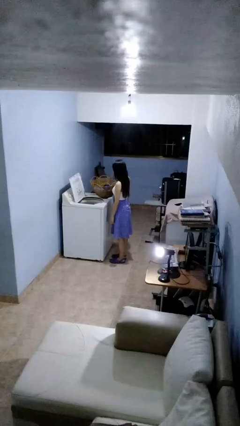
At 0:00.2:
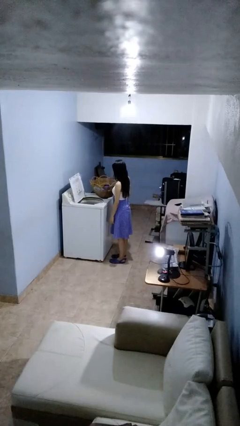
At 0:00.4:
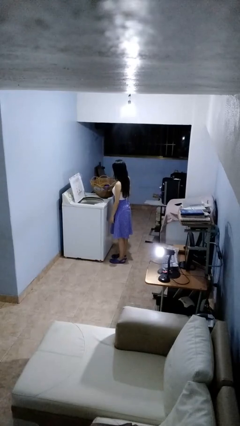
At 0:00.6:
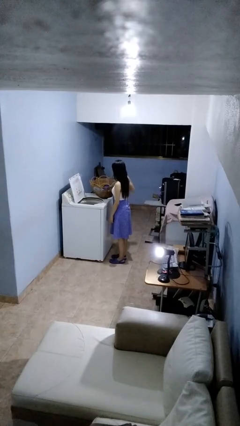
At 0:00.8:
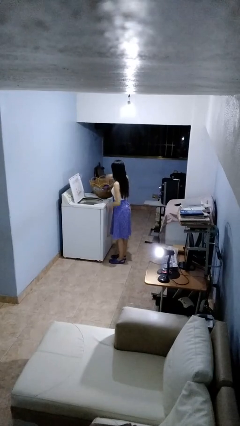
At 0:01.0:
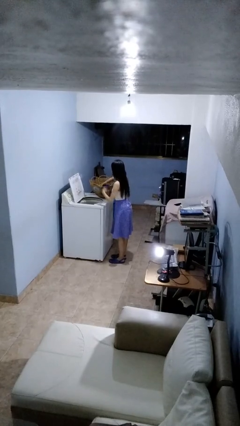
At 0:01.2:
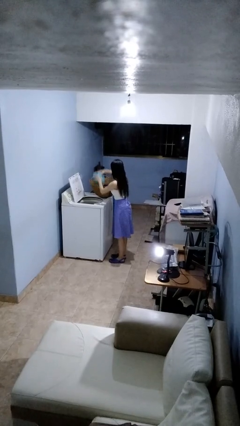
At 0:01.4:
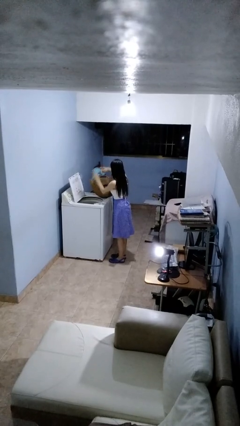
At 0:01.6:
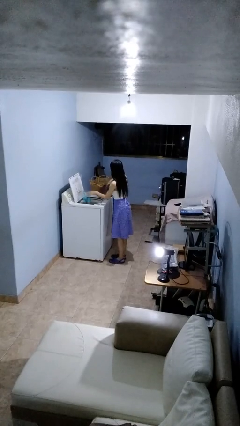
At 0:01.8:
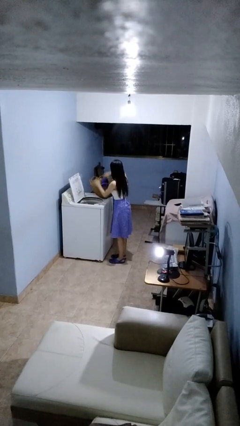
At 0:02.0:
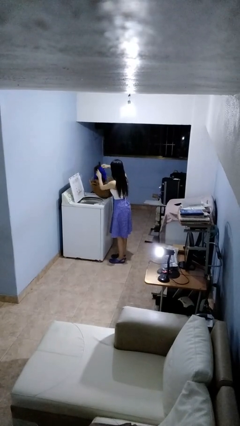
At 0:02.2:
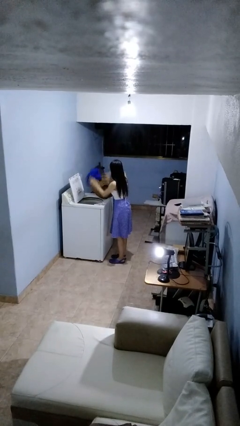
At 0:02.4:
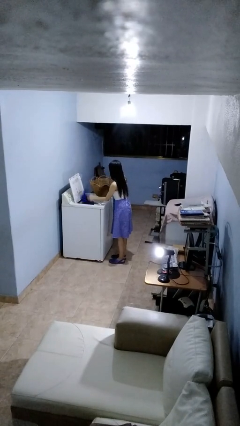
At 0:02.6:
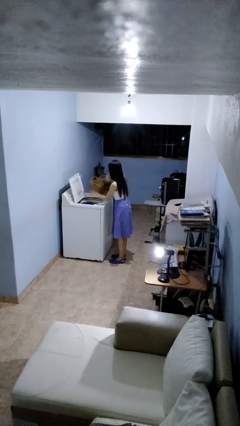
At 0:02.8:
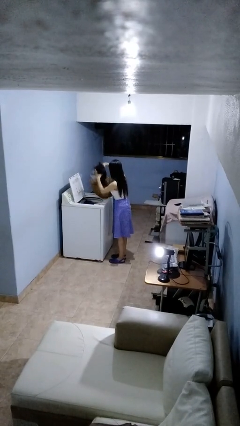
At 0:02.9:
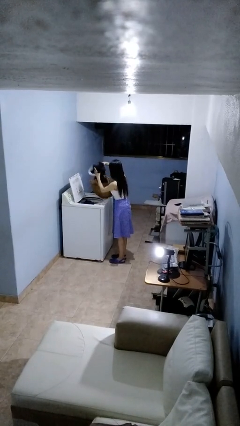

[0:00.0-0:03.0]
person loads clotheswasher

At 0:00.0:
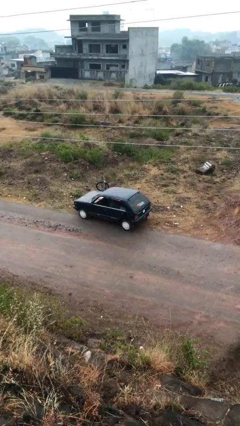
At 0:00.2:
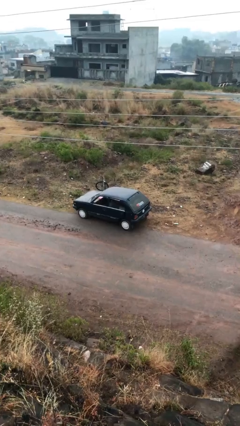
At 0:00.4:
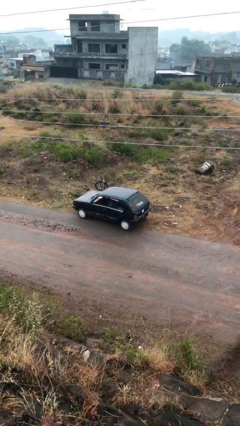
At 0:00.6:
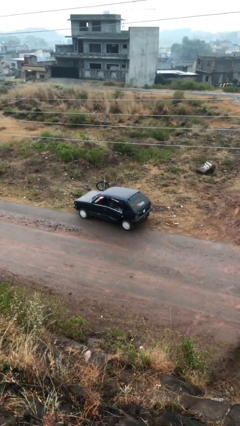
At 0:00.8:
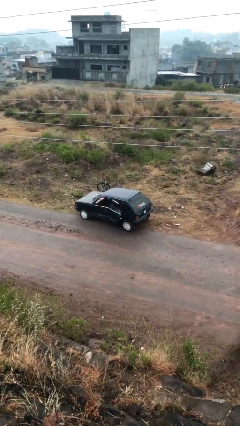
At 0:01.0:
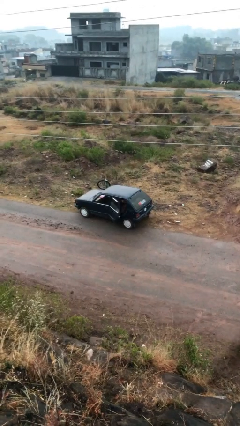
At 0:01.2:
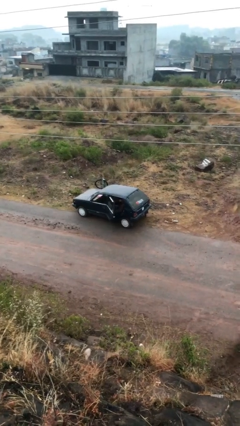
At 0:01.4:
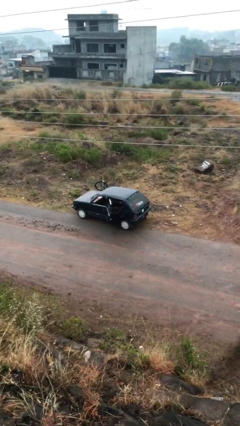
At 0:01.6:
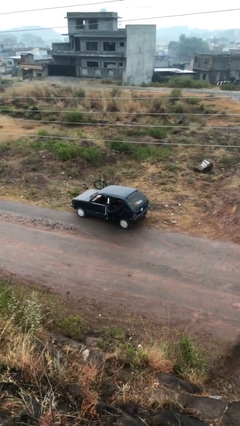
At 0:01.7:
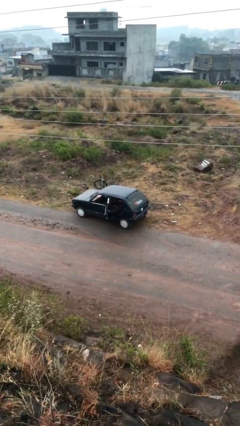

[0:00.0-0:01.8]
person opens car door

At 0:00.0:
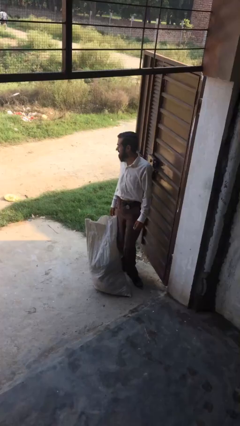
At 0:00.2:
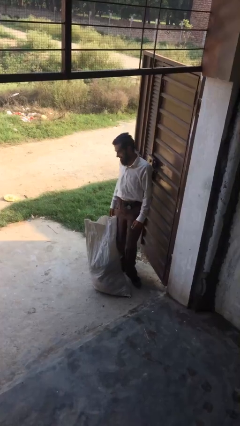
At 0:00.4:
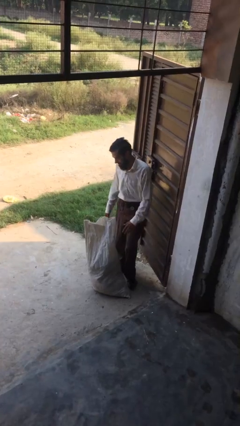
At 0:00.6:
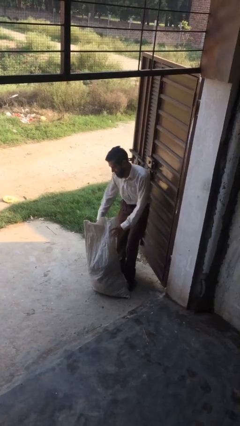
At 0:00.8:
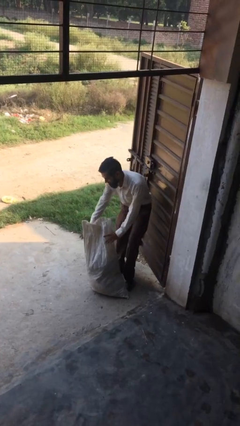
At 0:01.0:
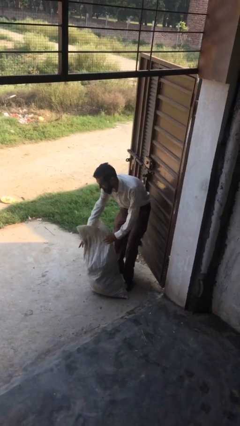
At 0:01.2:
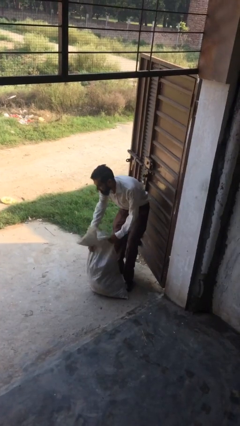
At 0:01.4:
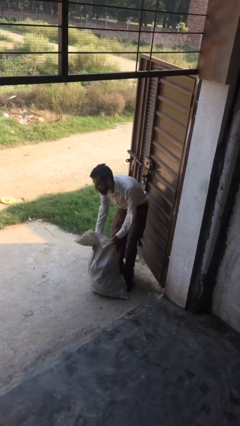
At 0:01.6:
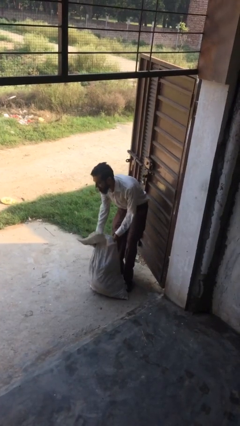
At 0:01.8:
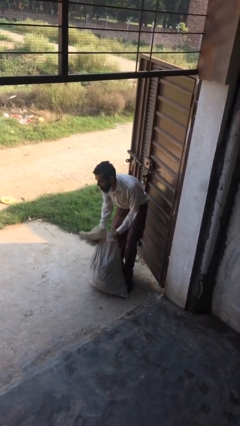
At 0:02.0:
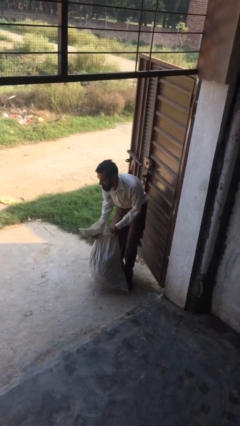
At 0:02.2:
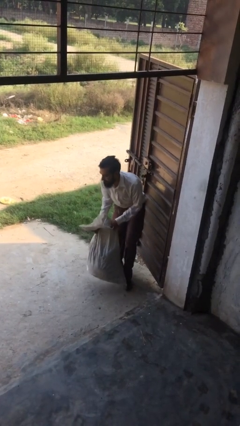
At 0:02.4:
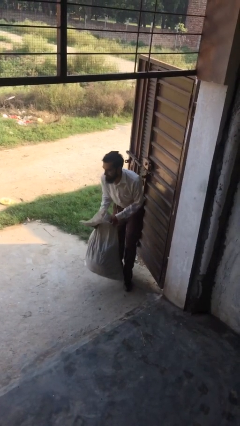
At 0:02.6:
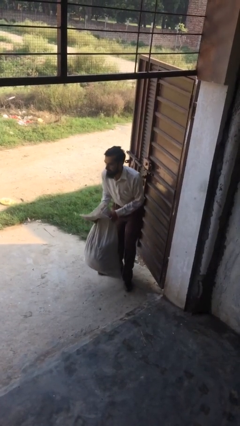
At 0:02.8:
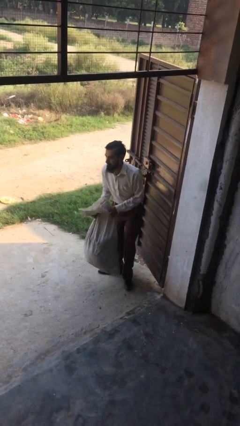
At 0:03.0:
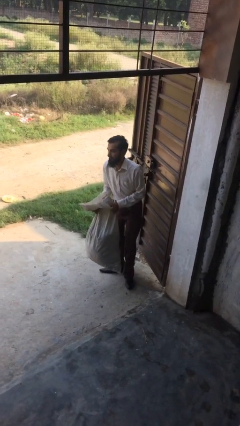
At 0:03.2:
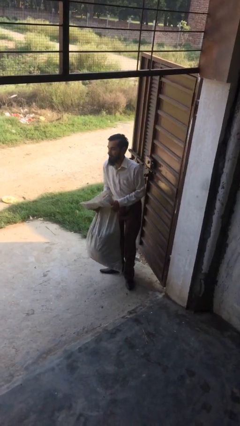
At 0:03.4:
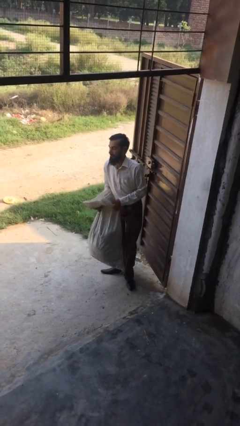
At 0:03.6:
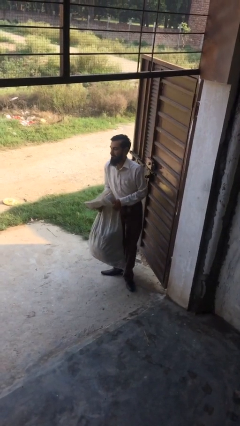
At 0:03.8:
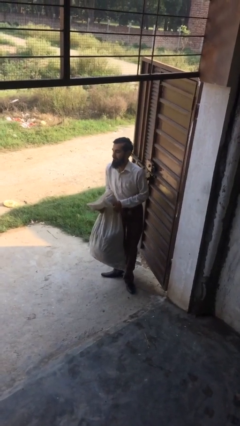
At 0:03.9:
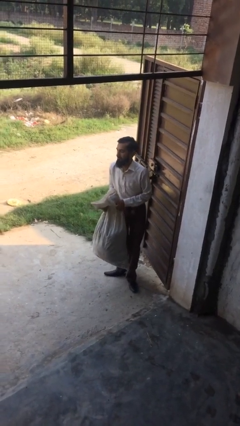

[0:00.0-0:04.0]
person picks up object from floor

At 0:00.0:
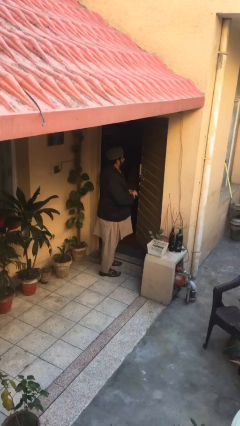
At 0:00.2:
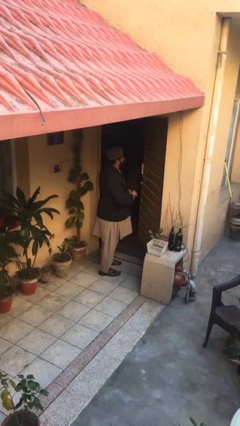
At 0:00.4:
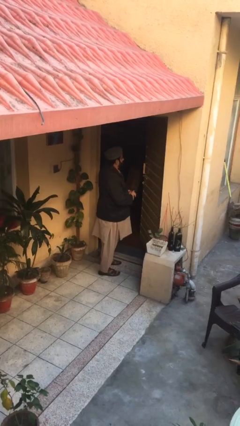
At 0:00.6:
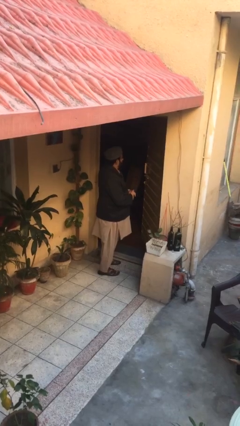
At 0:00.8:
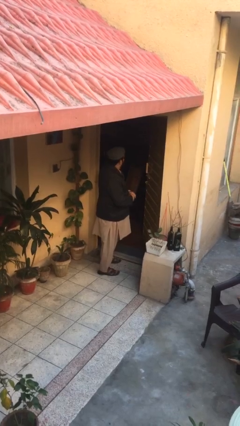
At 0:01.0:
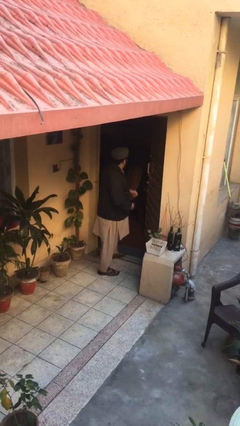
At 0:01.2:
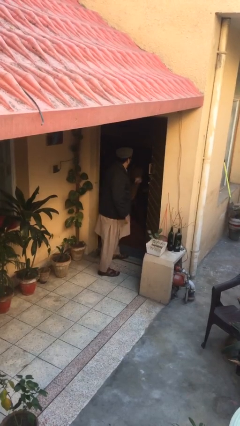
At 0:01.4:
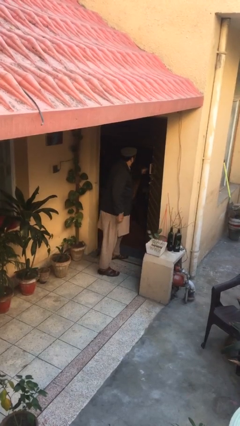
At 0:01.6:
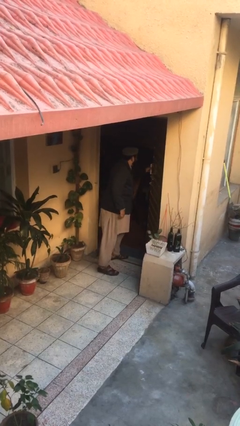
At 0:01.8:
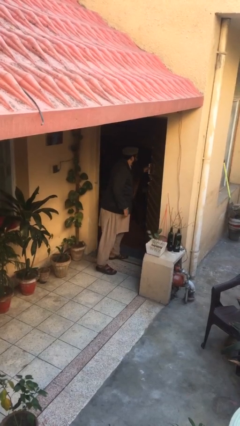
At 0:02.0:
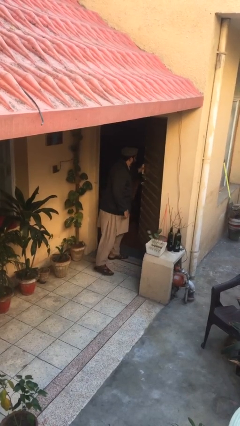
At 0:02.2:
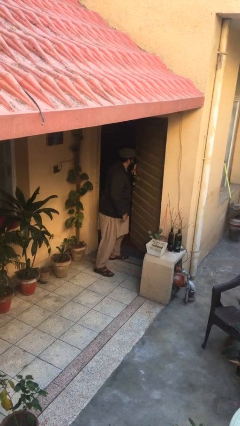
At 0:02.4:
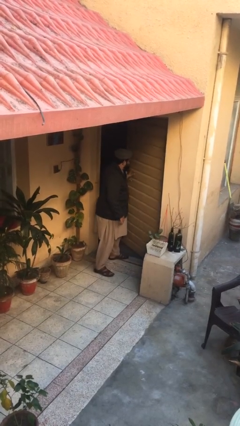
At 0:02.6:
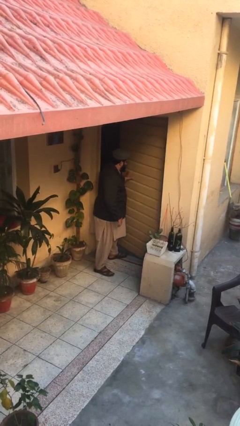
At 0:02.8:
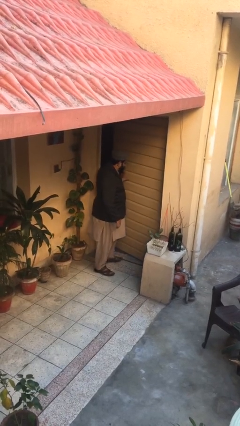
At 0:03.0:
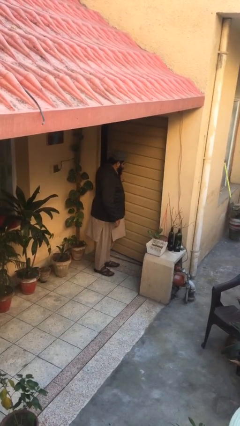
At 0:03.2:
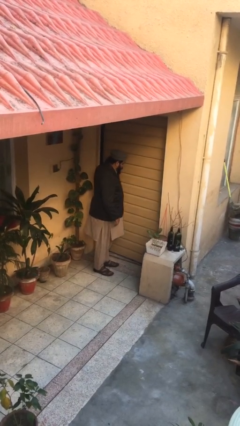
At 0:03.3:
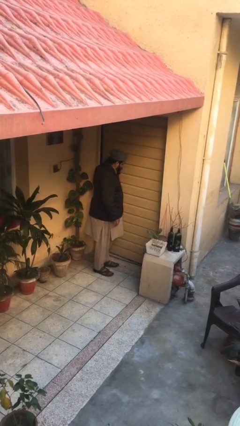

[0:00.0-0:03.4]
person closes facility door

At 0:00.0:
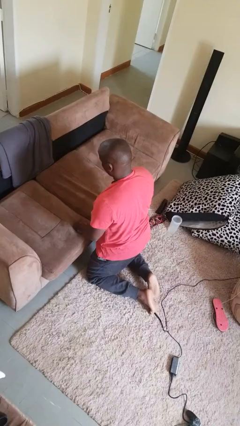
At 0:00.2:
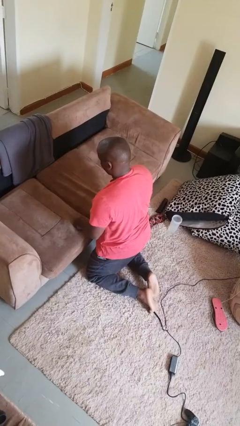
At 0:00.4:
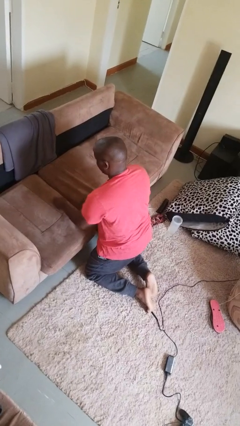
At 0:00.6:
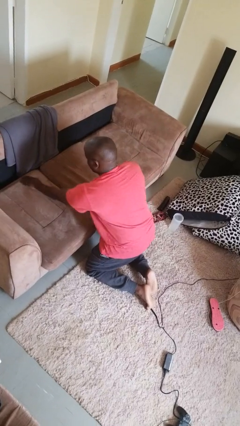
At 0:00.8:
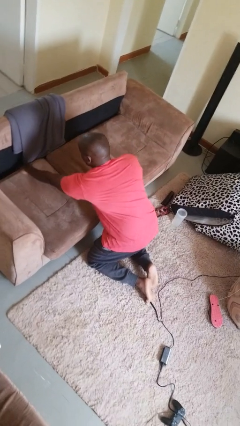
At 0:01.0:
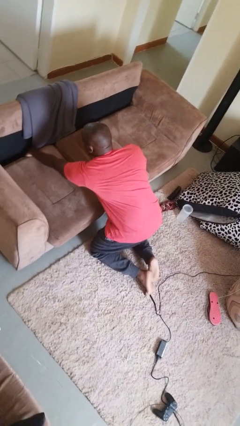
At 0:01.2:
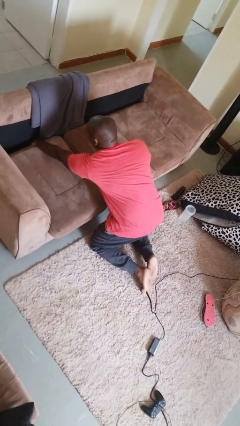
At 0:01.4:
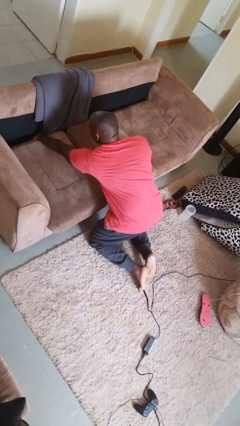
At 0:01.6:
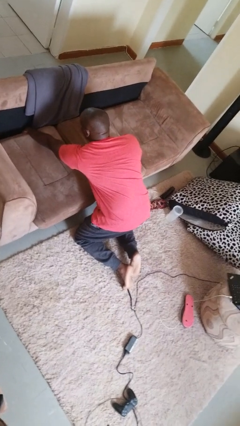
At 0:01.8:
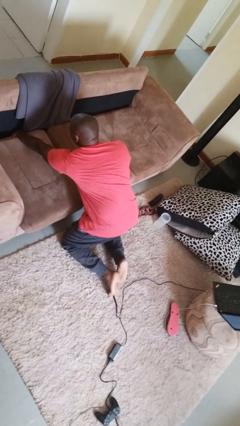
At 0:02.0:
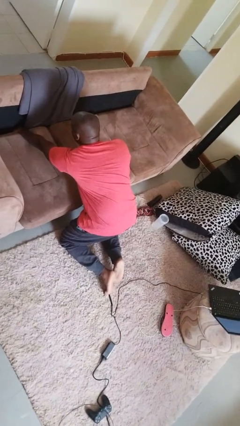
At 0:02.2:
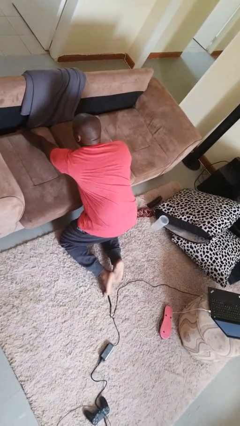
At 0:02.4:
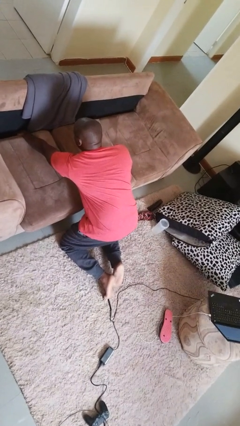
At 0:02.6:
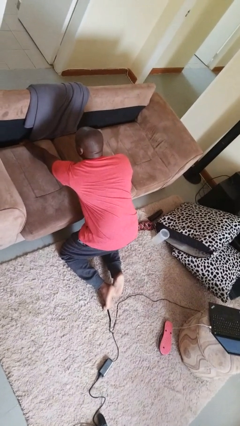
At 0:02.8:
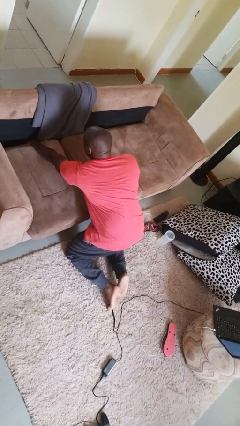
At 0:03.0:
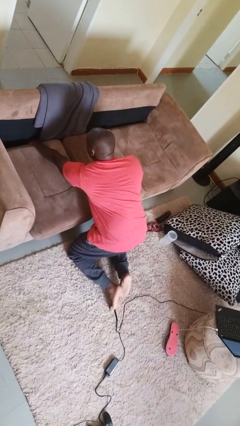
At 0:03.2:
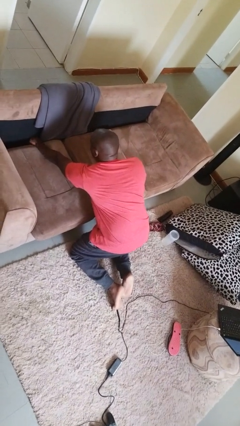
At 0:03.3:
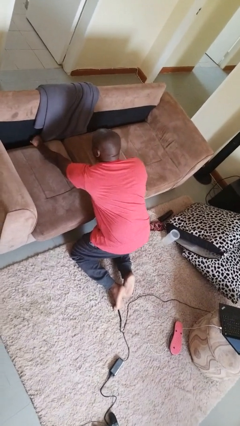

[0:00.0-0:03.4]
person searches in couch

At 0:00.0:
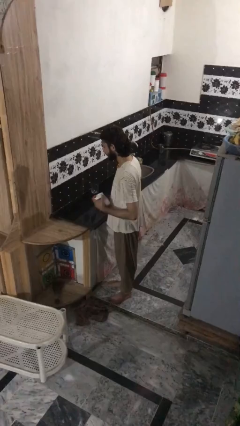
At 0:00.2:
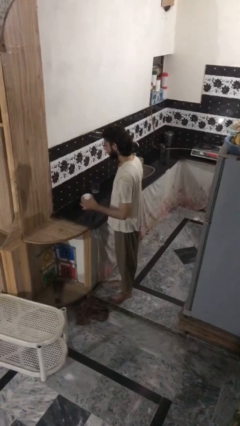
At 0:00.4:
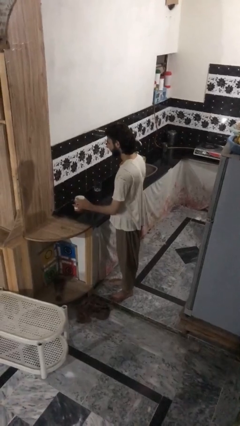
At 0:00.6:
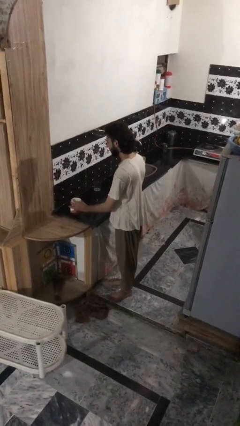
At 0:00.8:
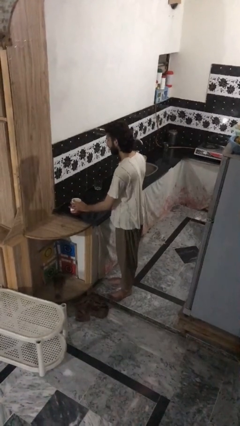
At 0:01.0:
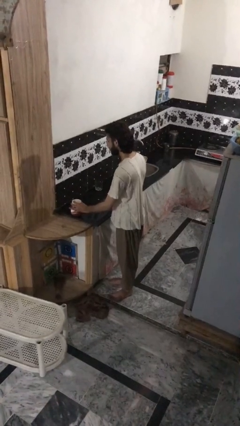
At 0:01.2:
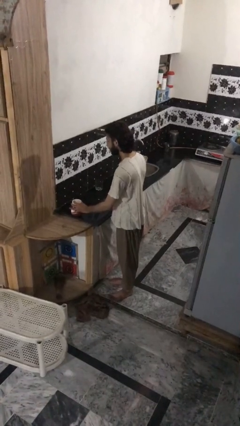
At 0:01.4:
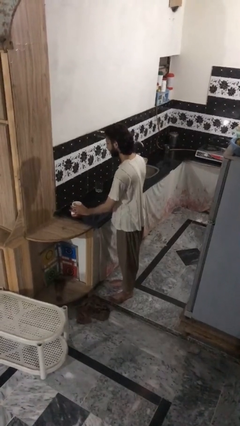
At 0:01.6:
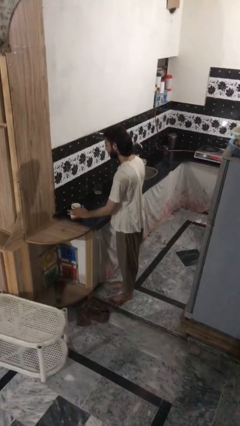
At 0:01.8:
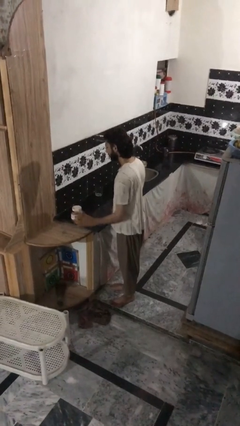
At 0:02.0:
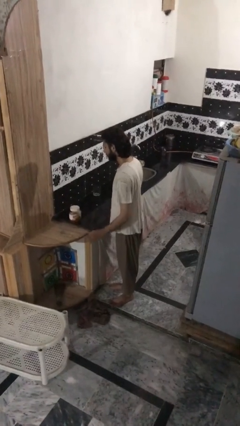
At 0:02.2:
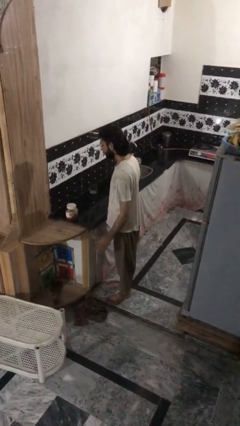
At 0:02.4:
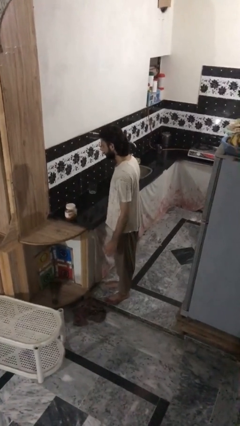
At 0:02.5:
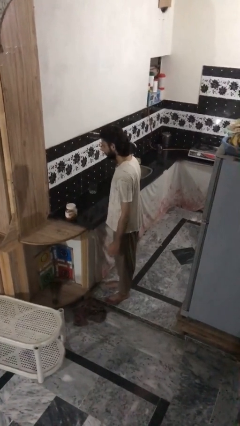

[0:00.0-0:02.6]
person puts down object on countertop
